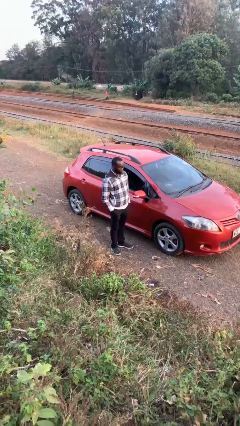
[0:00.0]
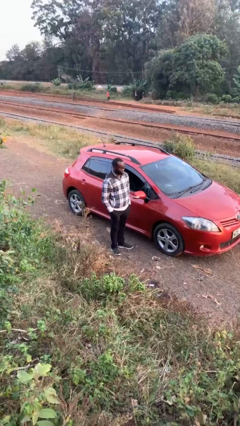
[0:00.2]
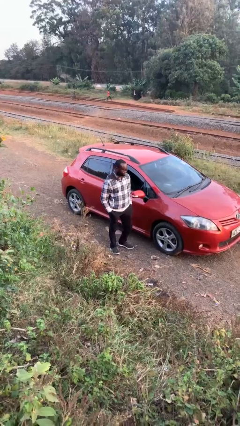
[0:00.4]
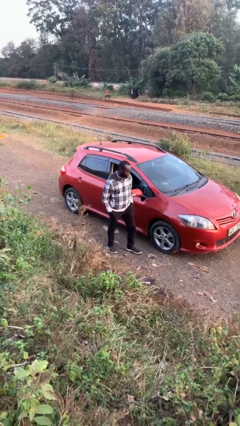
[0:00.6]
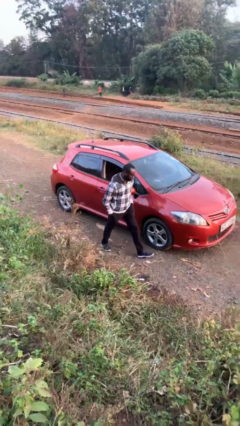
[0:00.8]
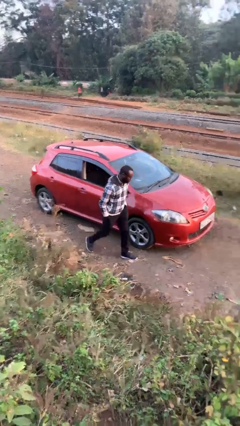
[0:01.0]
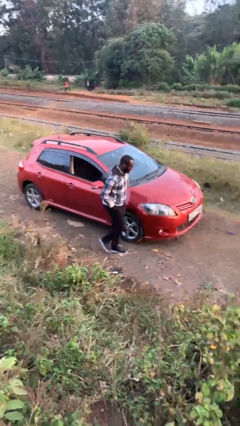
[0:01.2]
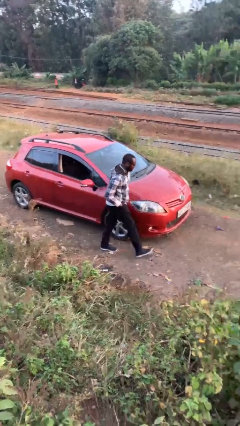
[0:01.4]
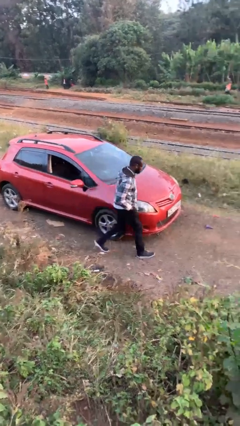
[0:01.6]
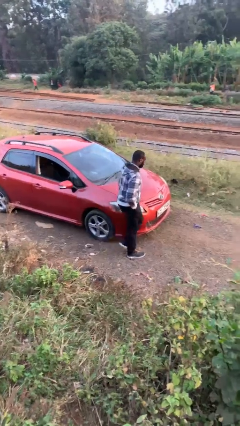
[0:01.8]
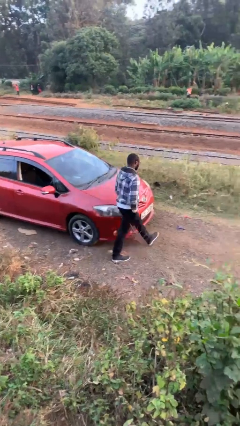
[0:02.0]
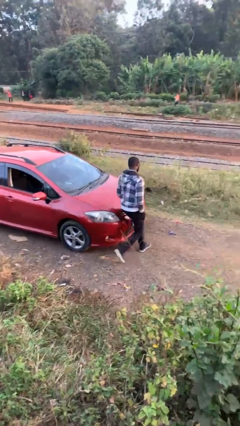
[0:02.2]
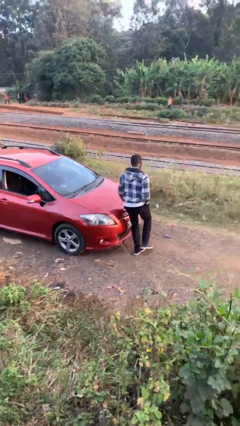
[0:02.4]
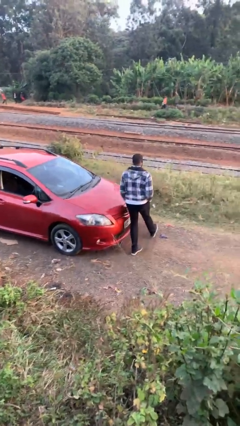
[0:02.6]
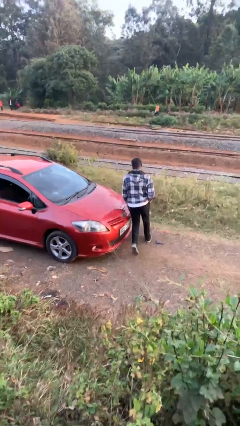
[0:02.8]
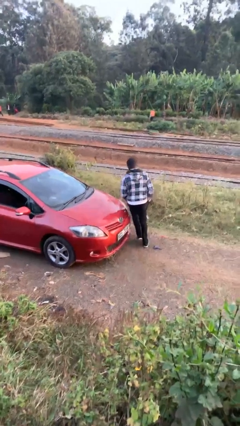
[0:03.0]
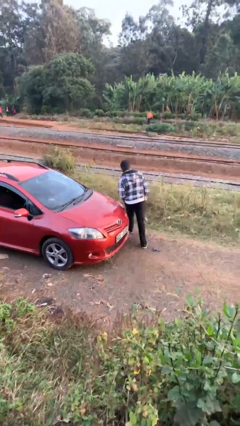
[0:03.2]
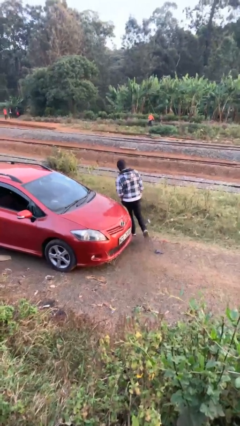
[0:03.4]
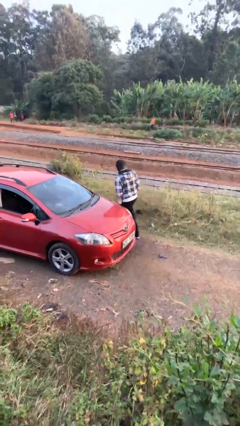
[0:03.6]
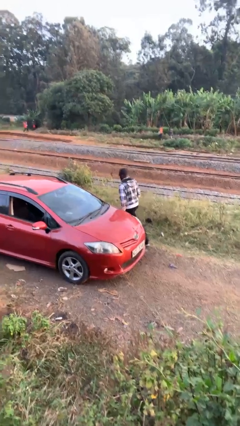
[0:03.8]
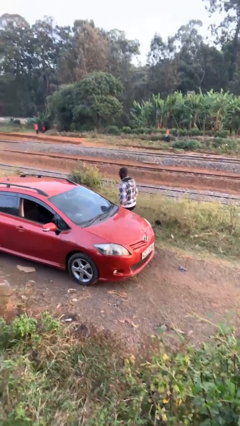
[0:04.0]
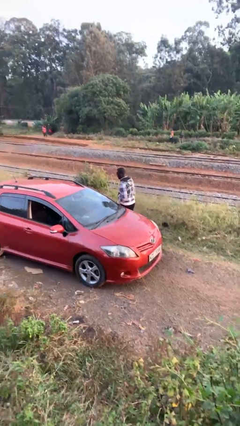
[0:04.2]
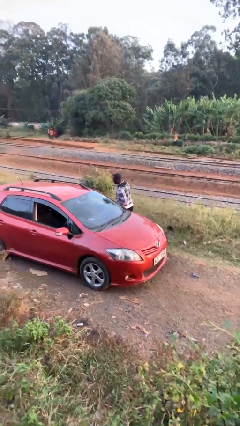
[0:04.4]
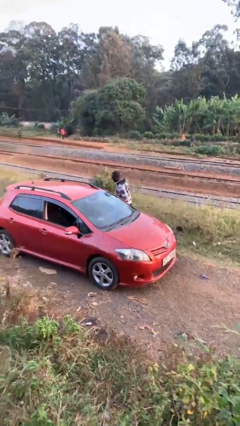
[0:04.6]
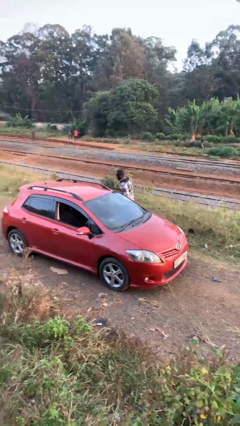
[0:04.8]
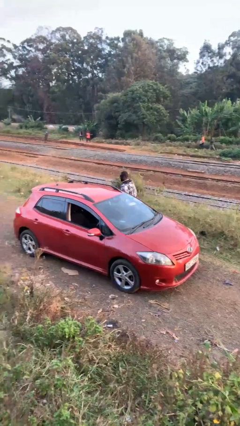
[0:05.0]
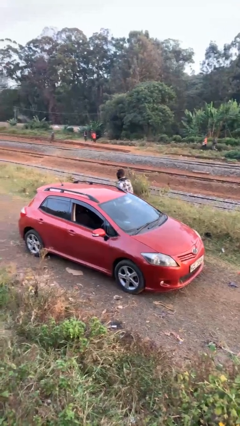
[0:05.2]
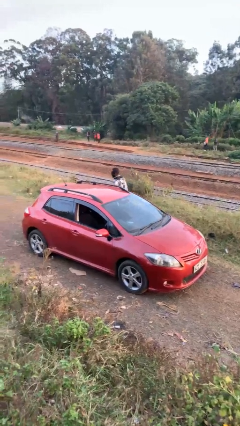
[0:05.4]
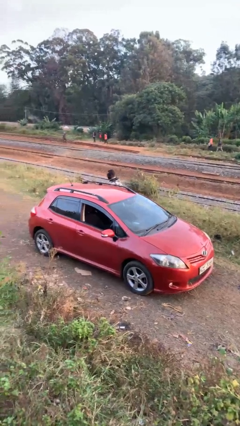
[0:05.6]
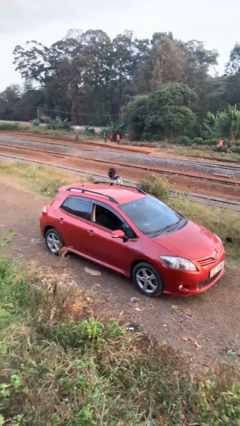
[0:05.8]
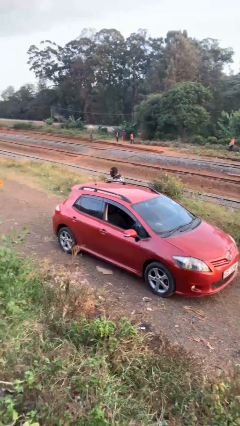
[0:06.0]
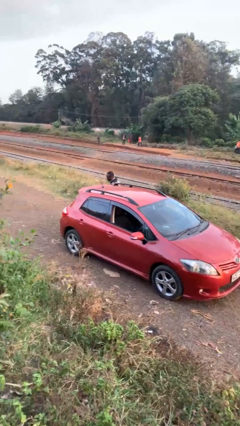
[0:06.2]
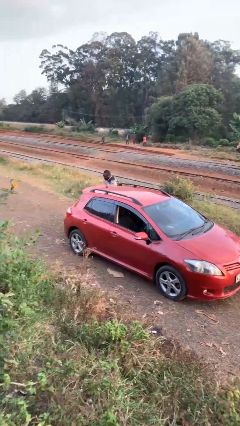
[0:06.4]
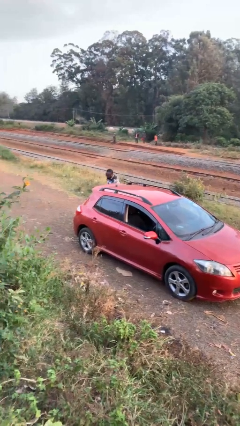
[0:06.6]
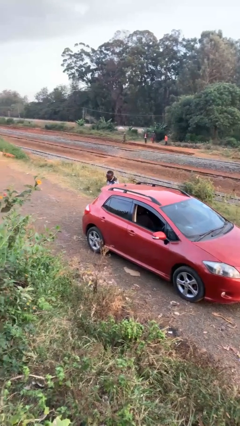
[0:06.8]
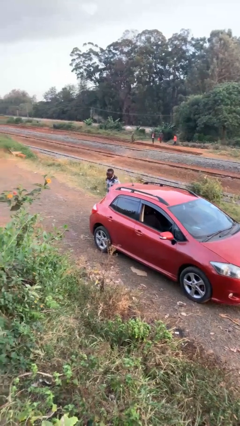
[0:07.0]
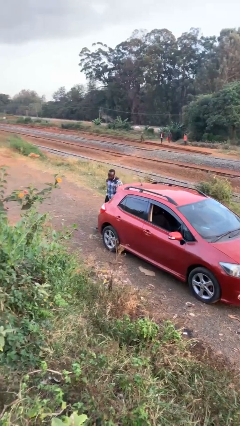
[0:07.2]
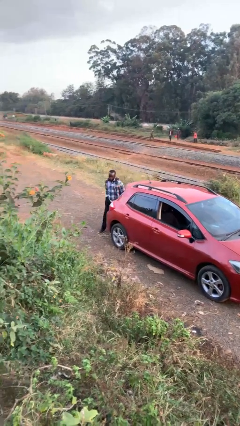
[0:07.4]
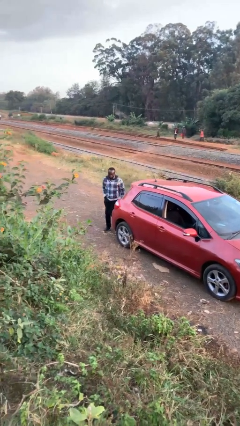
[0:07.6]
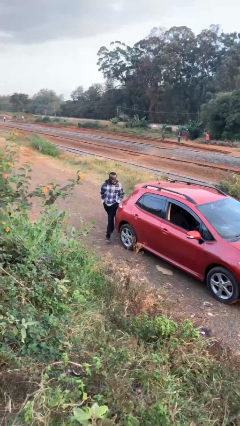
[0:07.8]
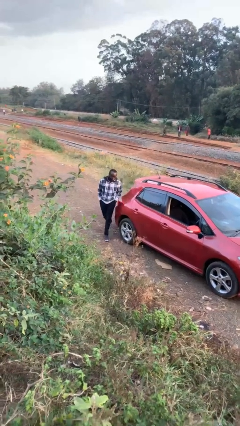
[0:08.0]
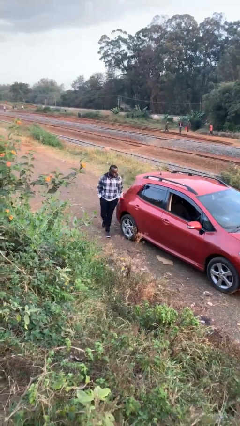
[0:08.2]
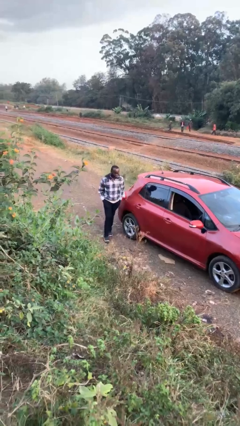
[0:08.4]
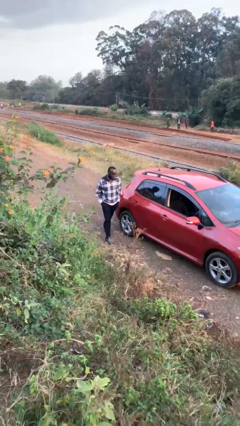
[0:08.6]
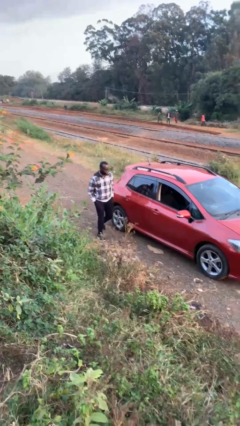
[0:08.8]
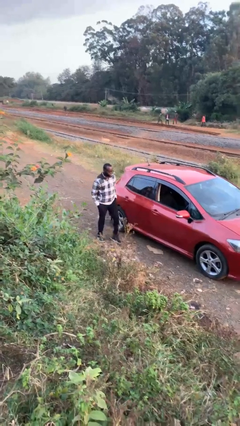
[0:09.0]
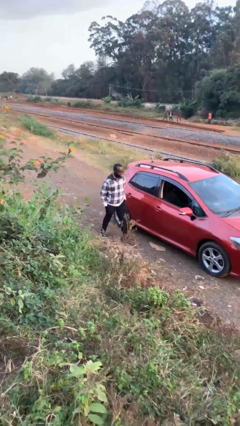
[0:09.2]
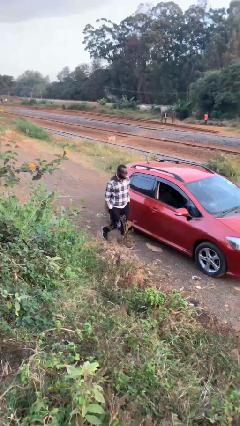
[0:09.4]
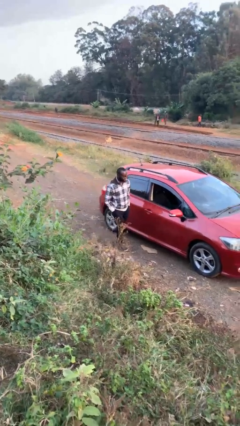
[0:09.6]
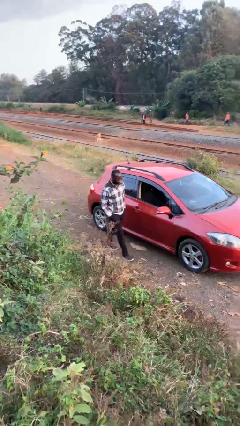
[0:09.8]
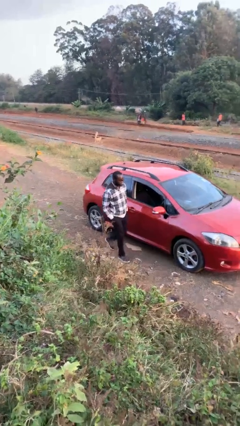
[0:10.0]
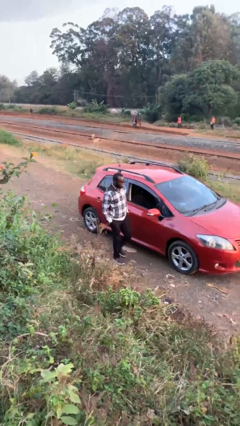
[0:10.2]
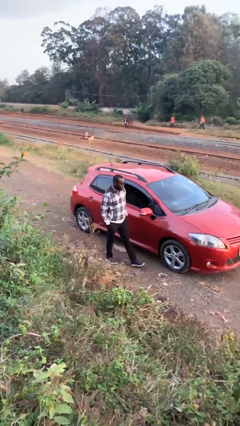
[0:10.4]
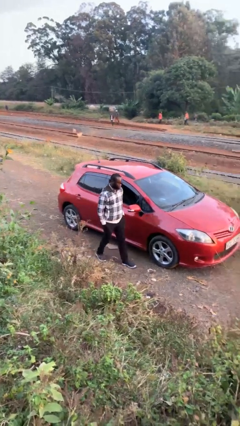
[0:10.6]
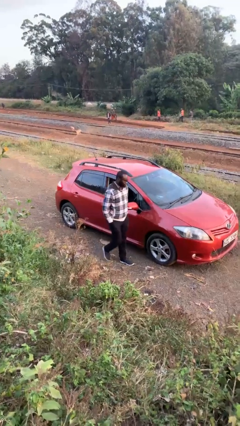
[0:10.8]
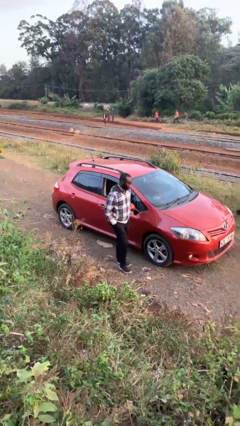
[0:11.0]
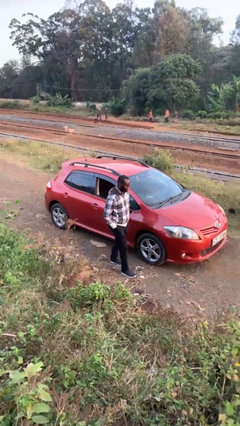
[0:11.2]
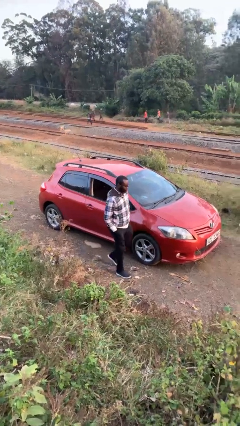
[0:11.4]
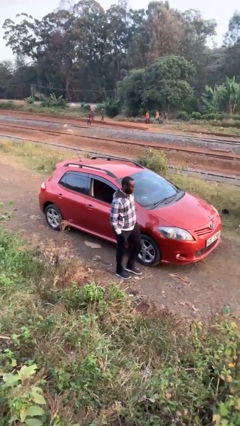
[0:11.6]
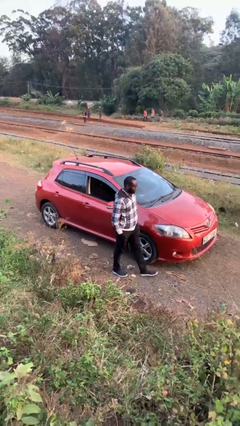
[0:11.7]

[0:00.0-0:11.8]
person walks around car

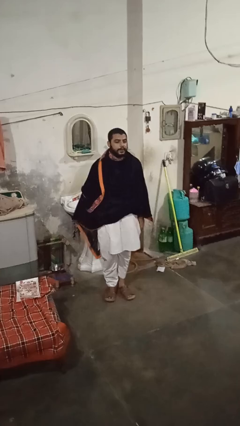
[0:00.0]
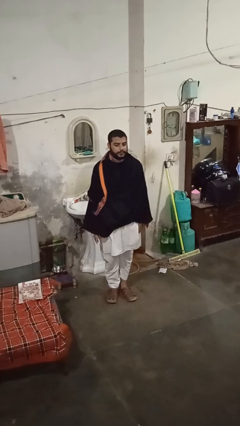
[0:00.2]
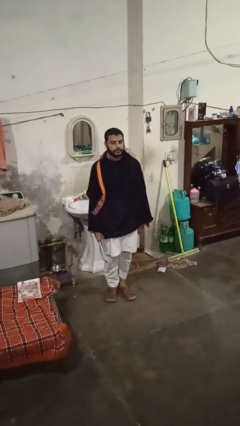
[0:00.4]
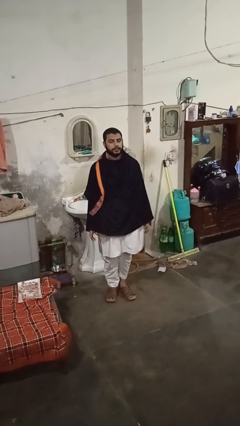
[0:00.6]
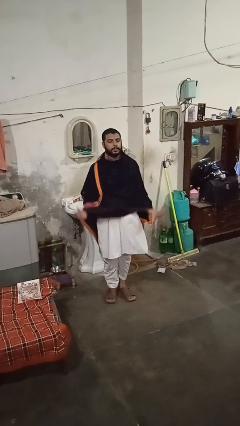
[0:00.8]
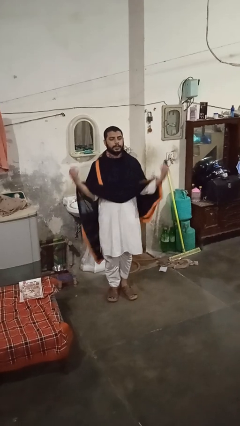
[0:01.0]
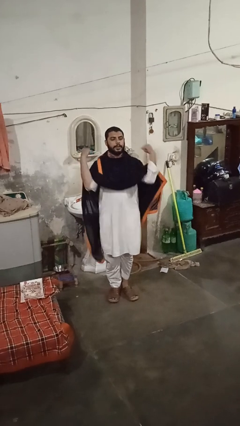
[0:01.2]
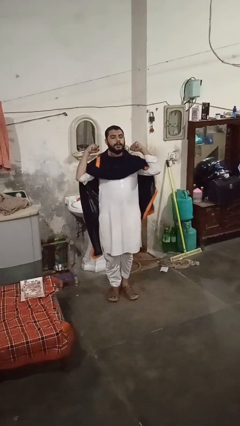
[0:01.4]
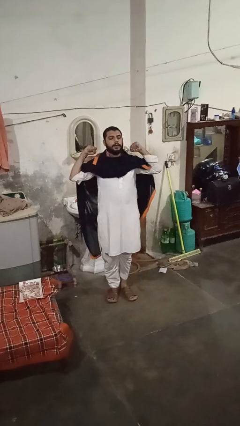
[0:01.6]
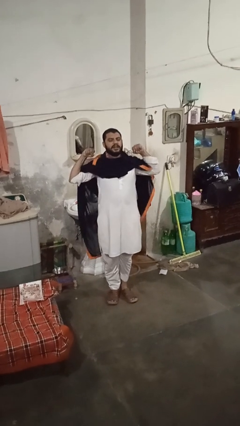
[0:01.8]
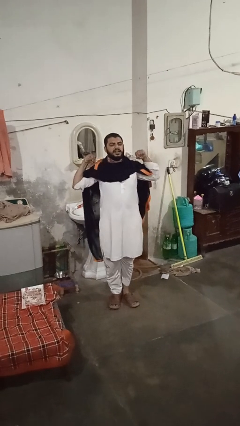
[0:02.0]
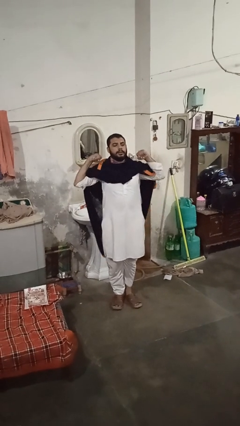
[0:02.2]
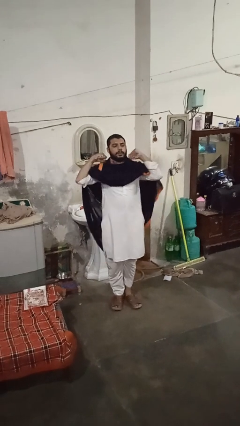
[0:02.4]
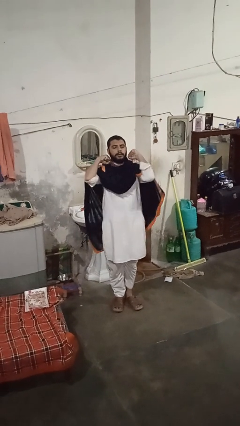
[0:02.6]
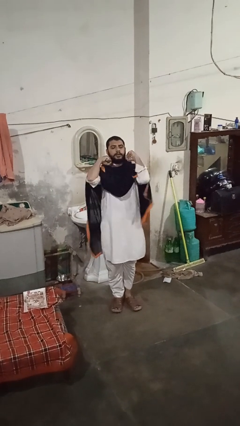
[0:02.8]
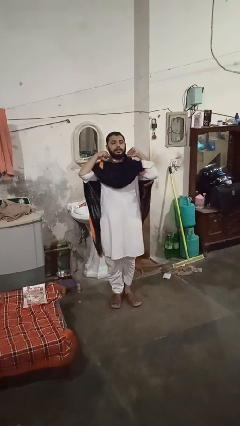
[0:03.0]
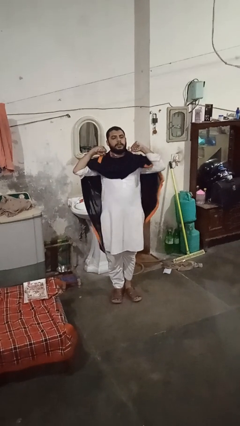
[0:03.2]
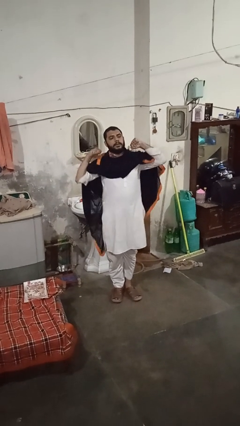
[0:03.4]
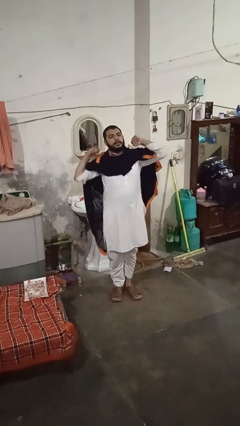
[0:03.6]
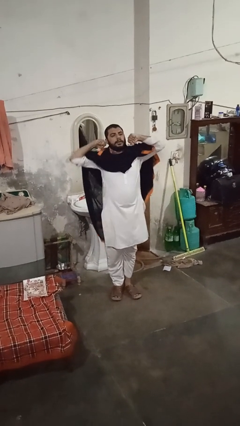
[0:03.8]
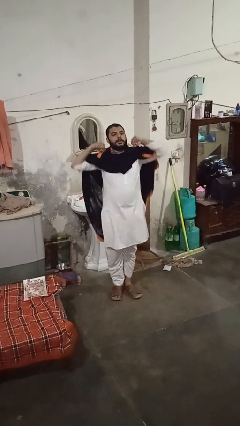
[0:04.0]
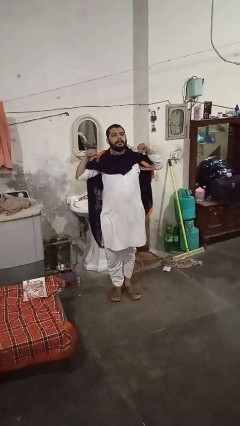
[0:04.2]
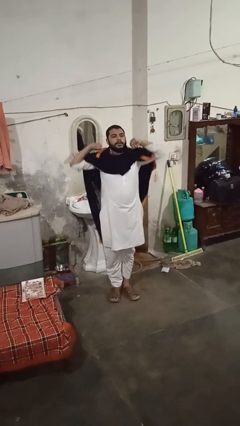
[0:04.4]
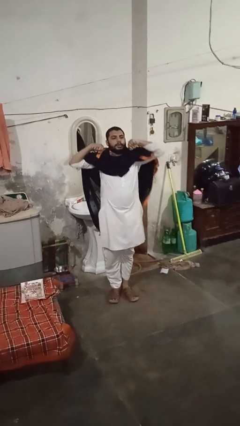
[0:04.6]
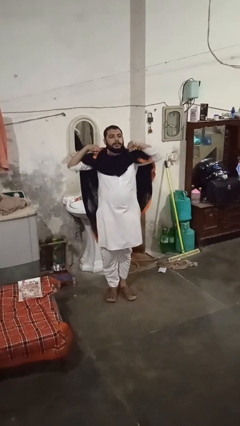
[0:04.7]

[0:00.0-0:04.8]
person stretches arms to side

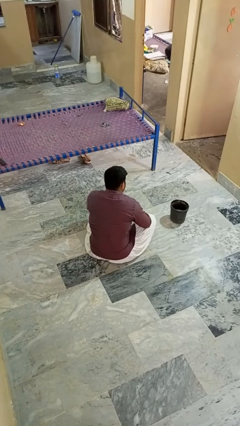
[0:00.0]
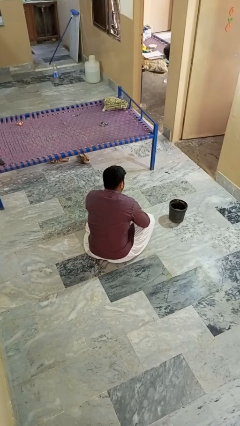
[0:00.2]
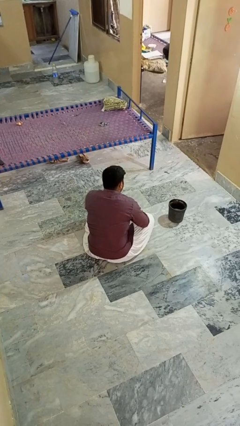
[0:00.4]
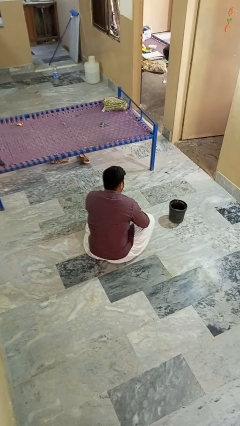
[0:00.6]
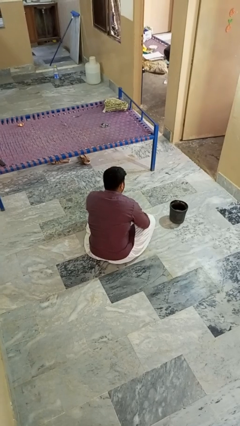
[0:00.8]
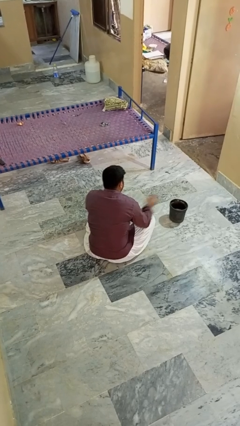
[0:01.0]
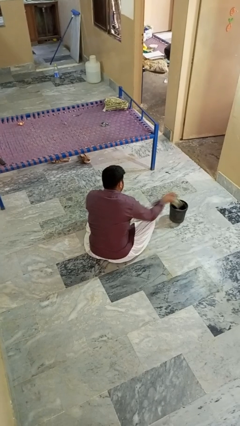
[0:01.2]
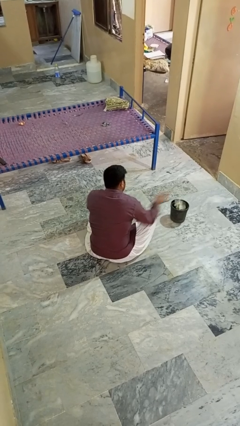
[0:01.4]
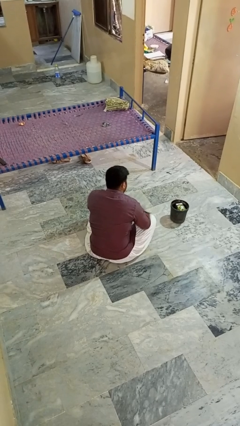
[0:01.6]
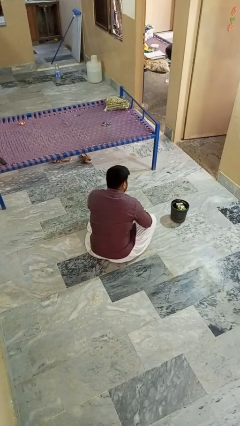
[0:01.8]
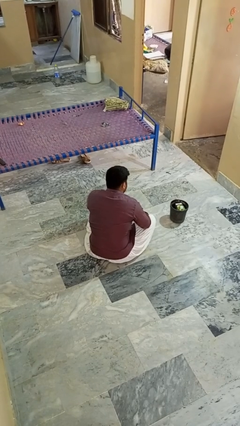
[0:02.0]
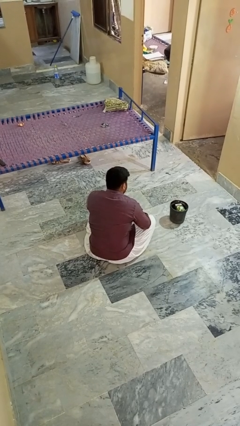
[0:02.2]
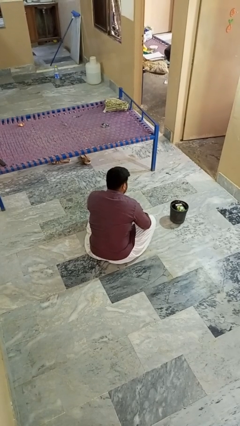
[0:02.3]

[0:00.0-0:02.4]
person puts object into basket
